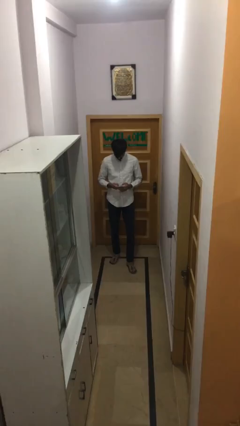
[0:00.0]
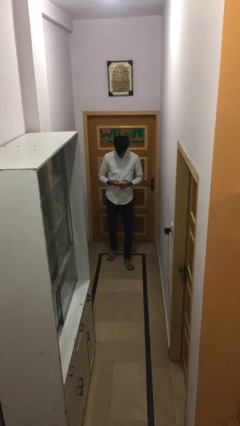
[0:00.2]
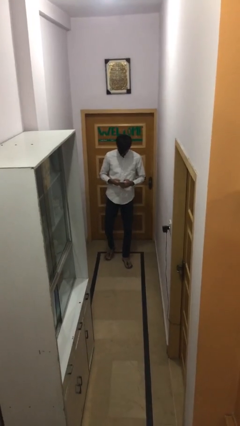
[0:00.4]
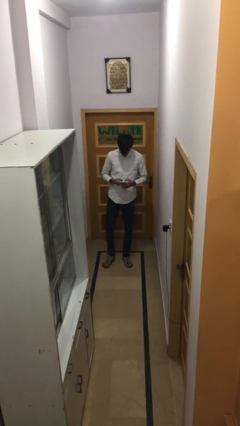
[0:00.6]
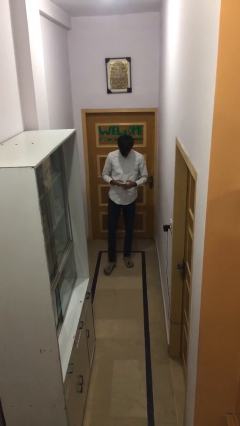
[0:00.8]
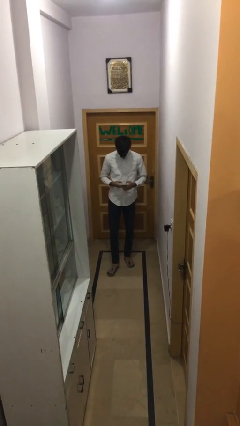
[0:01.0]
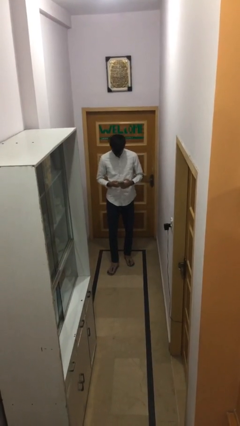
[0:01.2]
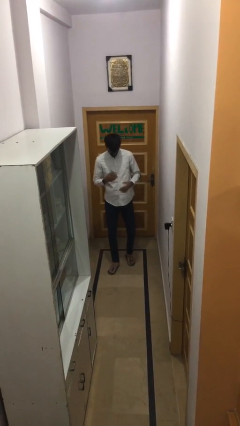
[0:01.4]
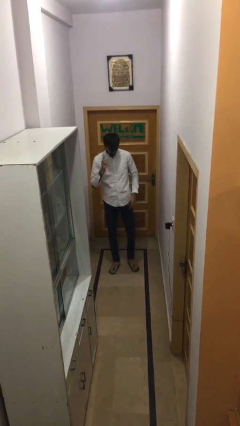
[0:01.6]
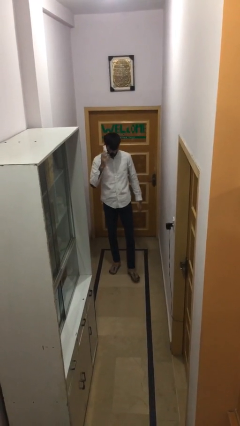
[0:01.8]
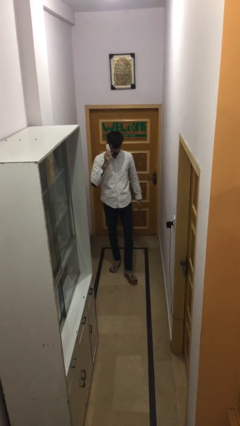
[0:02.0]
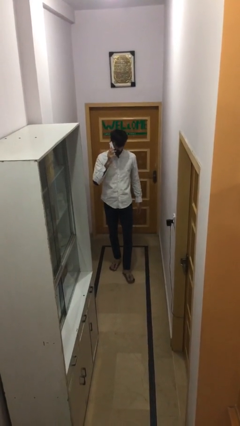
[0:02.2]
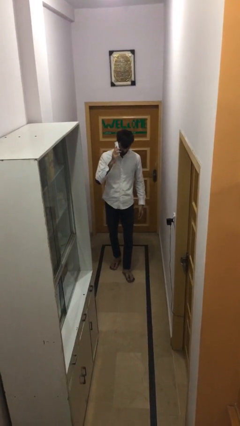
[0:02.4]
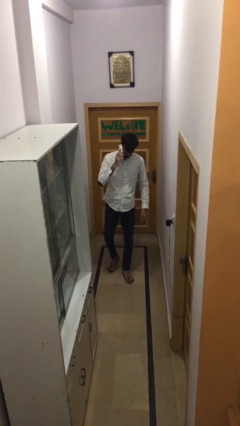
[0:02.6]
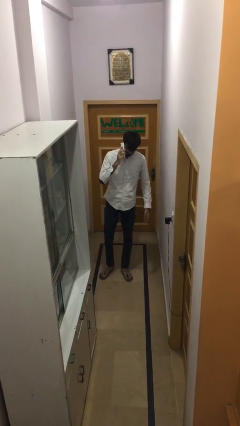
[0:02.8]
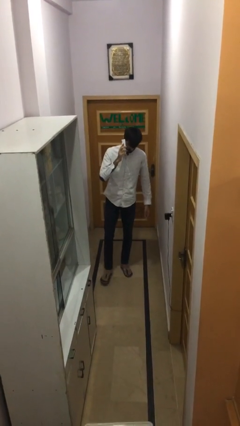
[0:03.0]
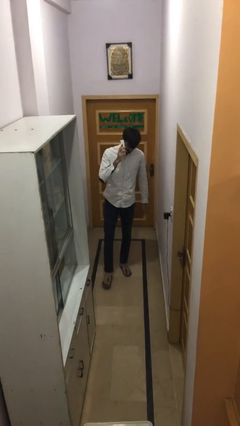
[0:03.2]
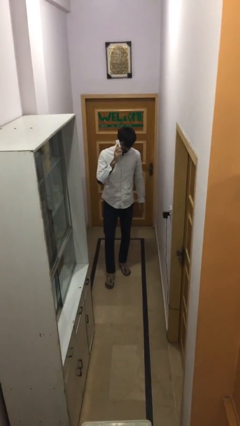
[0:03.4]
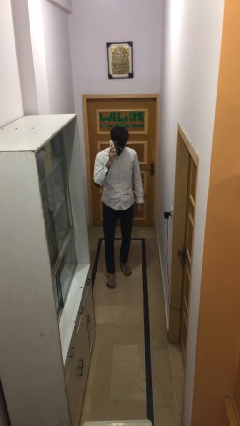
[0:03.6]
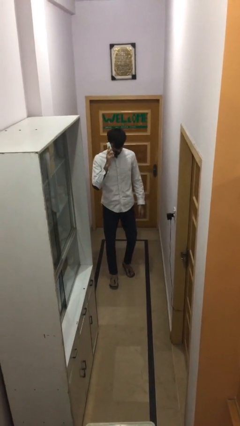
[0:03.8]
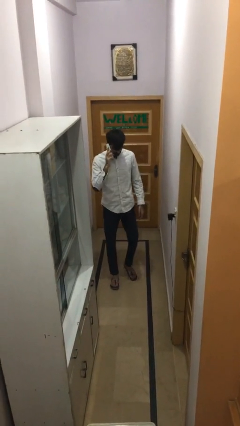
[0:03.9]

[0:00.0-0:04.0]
person talks on phone

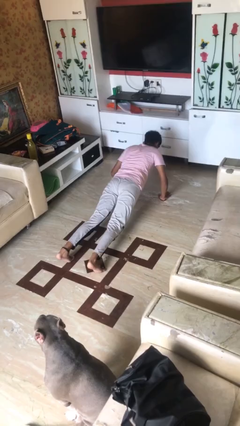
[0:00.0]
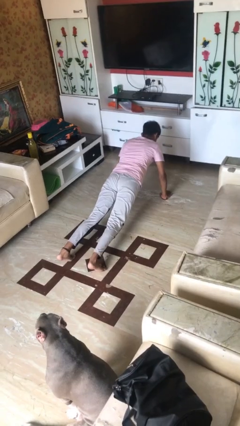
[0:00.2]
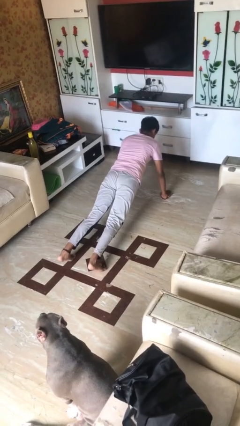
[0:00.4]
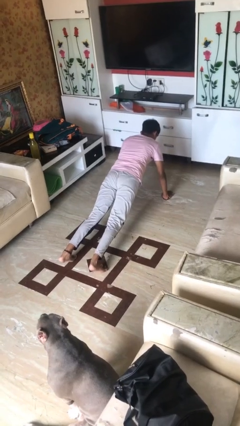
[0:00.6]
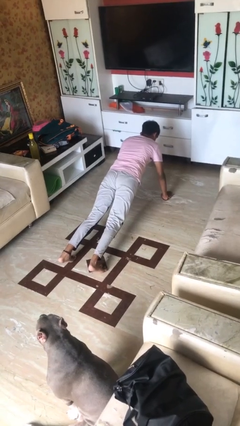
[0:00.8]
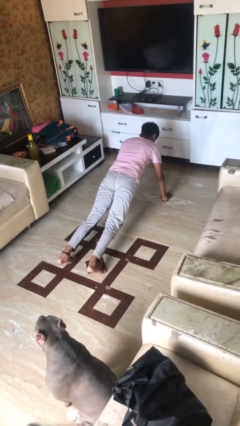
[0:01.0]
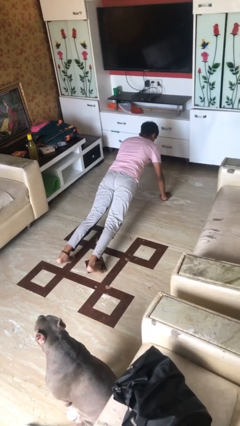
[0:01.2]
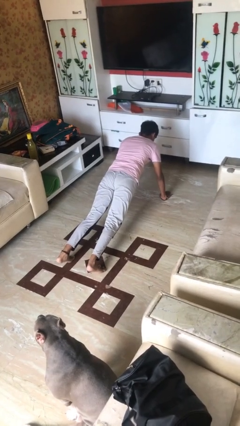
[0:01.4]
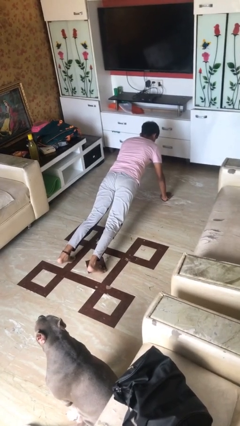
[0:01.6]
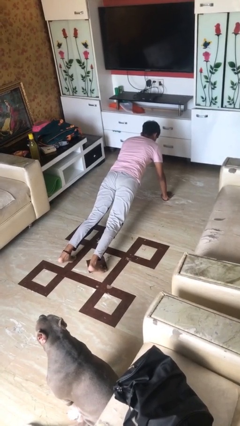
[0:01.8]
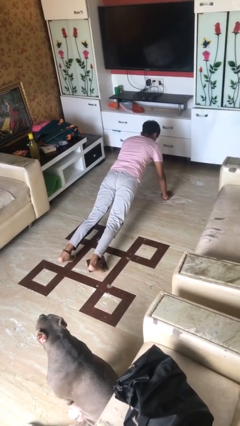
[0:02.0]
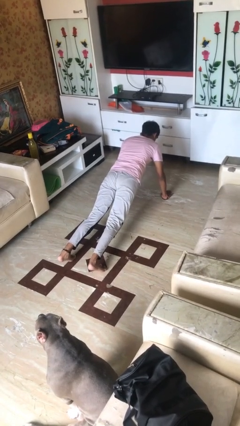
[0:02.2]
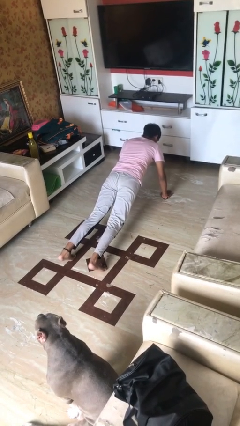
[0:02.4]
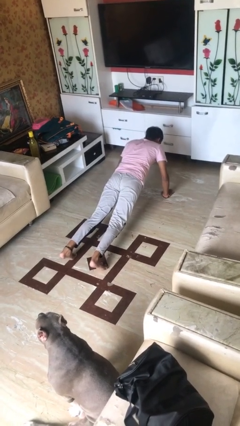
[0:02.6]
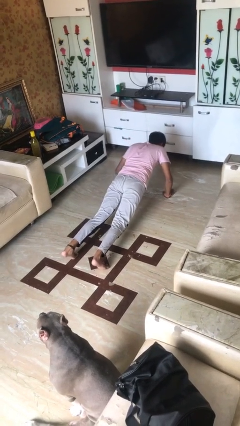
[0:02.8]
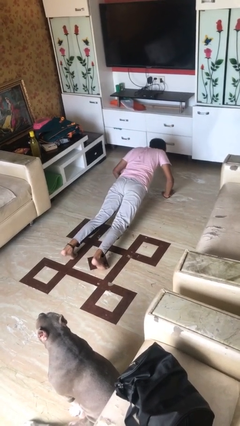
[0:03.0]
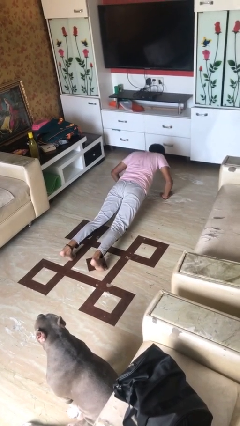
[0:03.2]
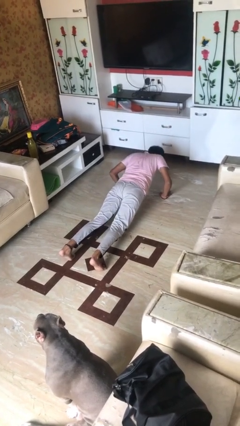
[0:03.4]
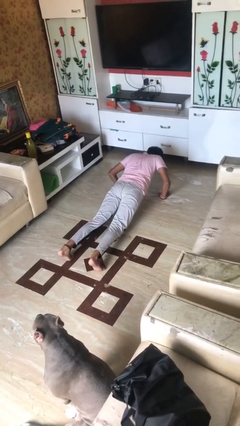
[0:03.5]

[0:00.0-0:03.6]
person exercises with pushup

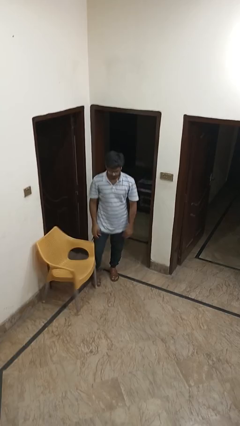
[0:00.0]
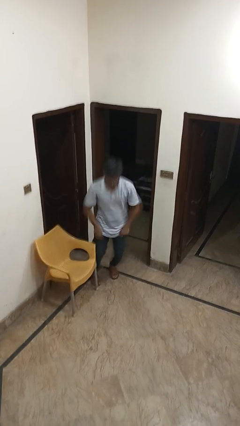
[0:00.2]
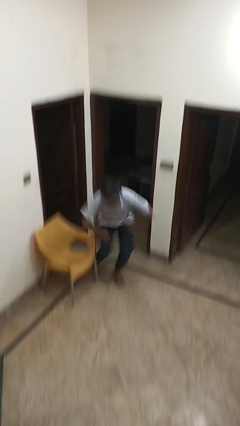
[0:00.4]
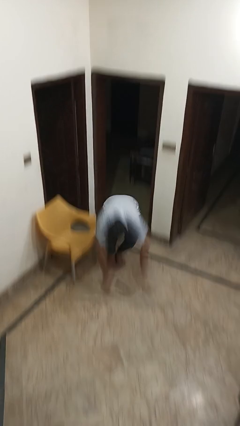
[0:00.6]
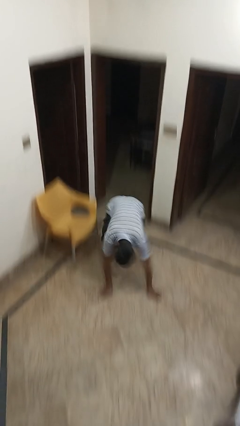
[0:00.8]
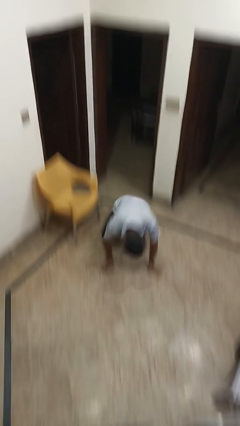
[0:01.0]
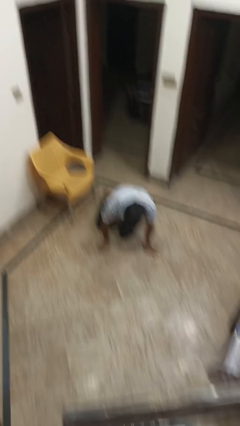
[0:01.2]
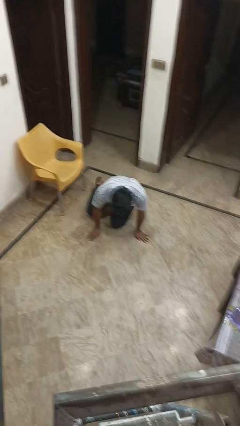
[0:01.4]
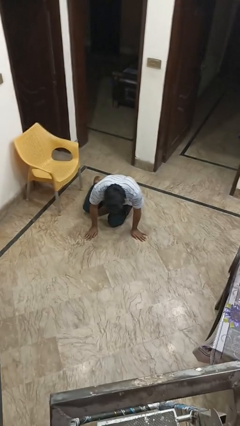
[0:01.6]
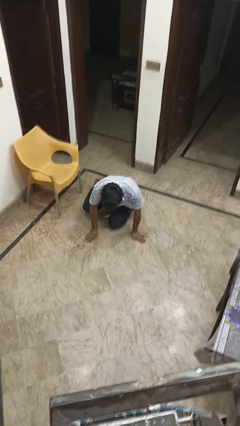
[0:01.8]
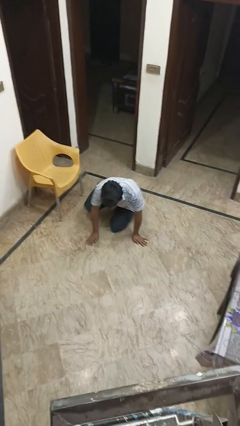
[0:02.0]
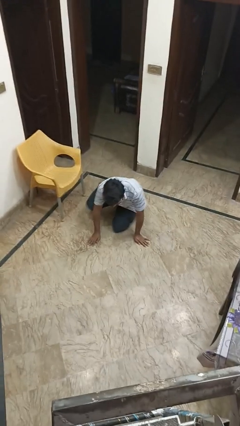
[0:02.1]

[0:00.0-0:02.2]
person trips on object on floor

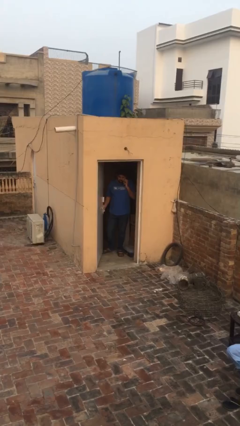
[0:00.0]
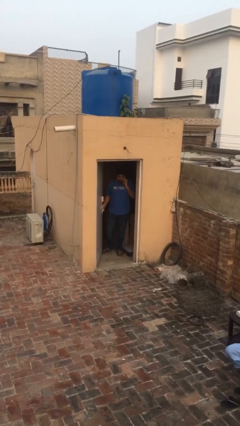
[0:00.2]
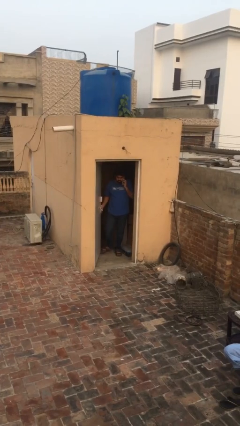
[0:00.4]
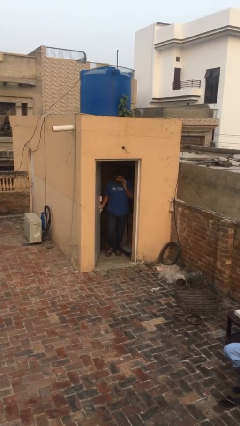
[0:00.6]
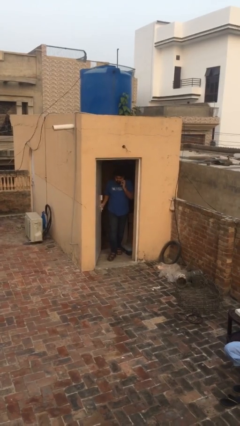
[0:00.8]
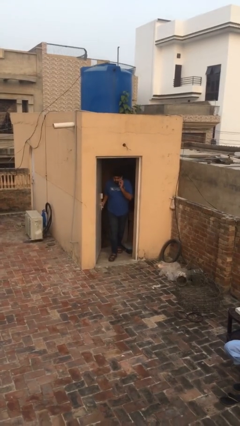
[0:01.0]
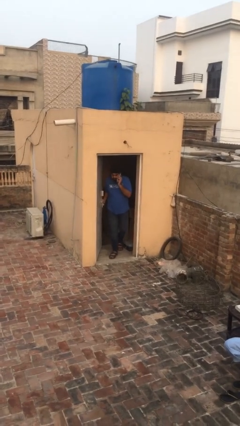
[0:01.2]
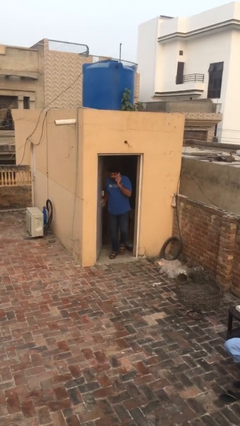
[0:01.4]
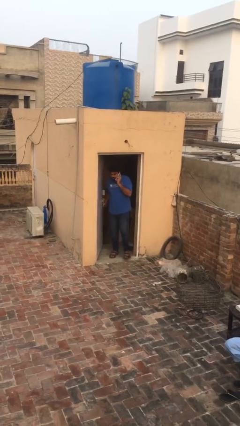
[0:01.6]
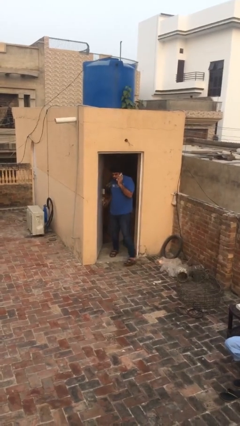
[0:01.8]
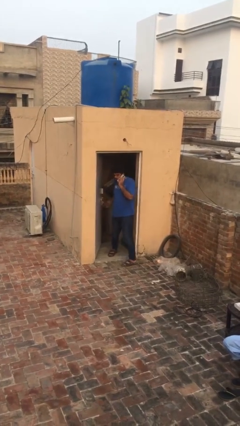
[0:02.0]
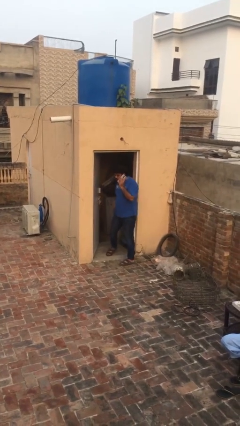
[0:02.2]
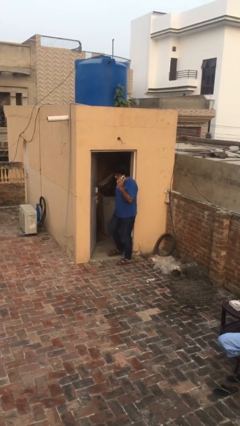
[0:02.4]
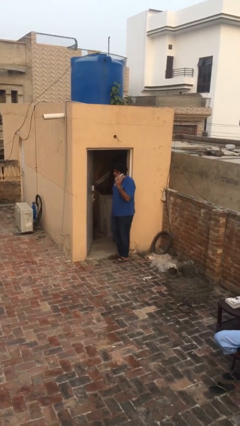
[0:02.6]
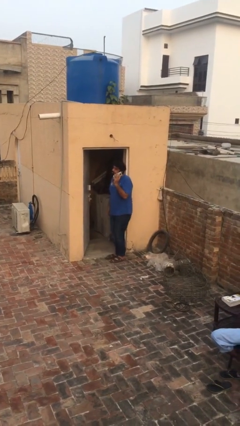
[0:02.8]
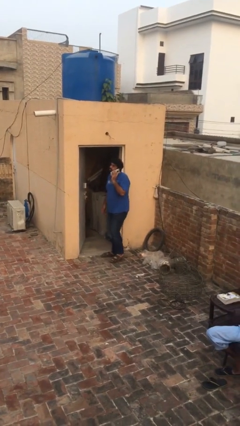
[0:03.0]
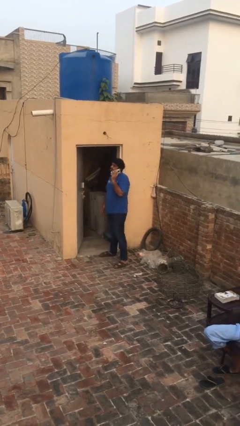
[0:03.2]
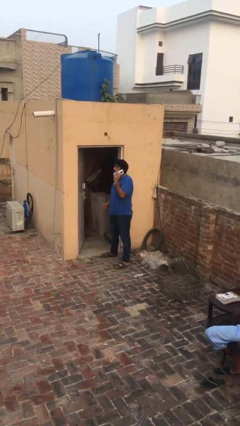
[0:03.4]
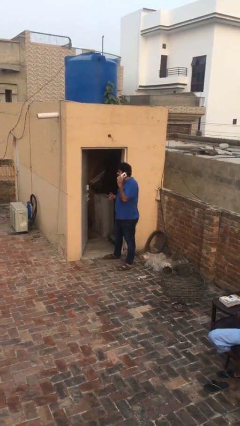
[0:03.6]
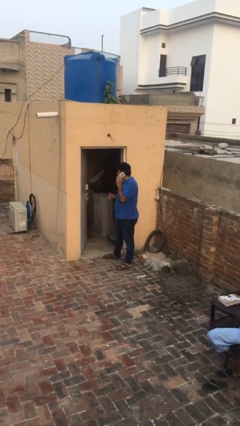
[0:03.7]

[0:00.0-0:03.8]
person enters scene through structure

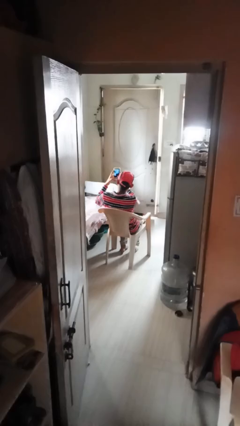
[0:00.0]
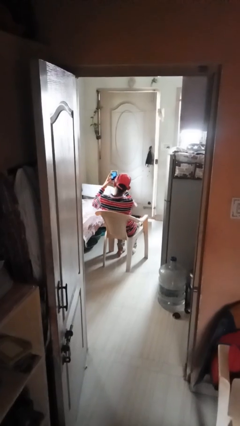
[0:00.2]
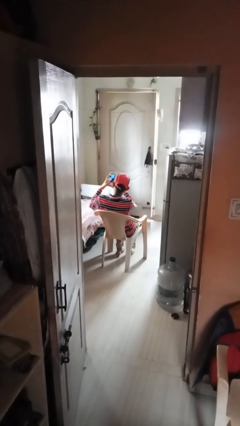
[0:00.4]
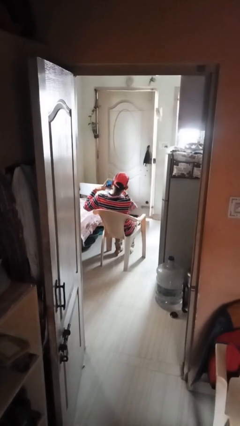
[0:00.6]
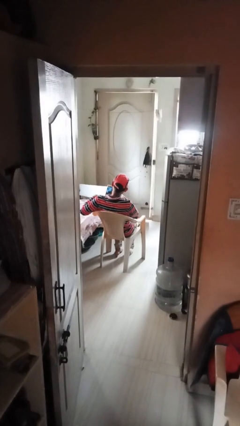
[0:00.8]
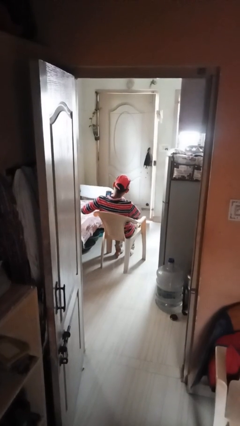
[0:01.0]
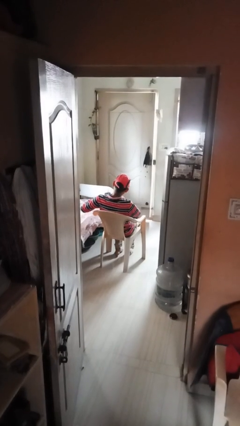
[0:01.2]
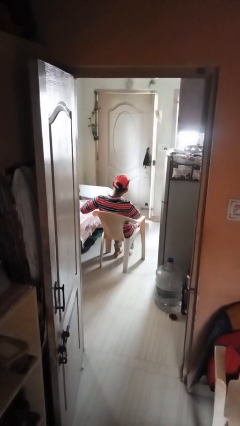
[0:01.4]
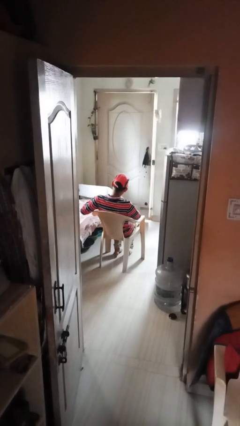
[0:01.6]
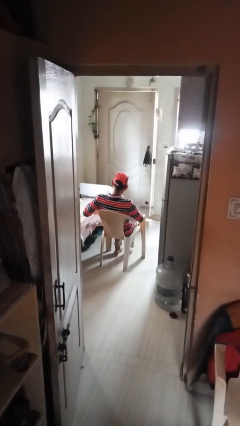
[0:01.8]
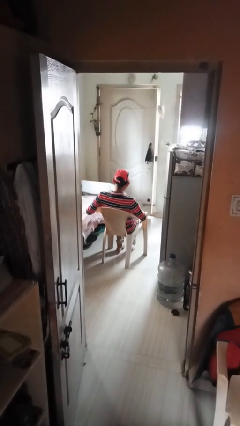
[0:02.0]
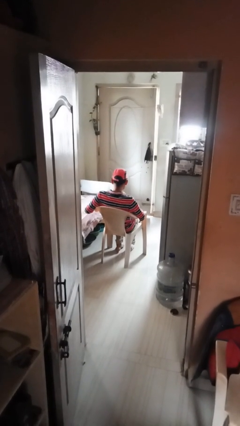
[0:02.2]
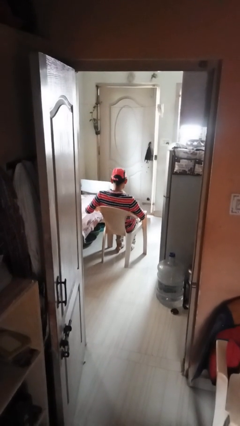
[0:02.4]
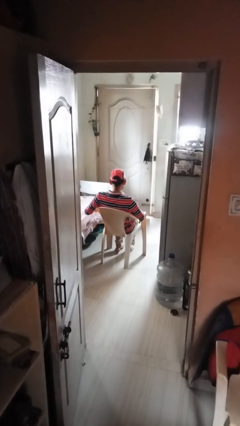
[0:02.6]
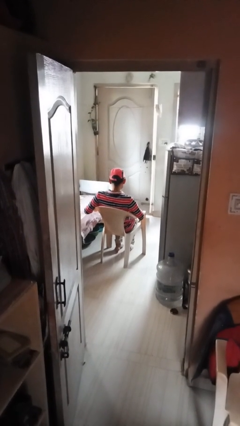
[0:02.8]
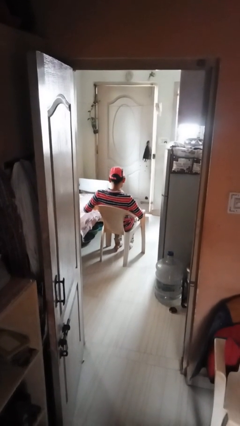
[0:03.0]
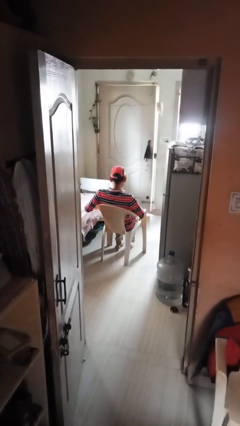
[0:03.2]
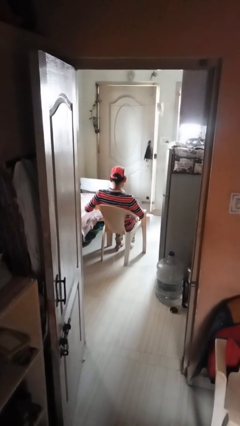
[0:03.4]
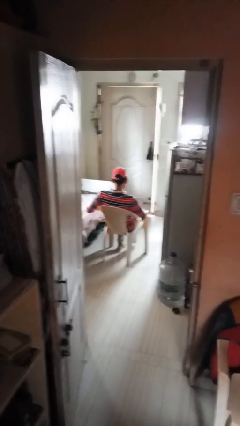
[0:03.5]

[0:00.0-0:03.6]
person puts phone into pocket

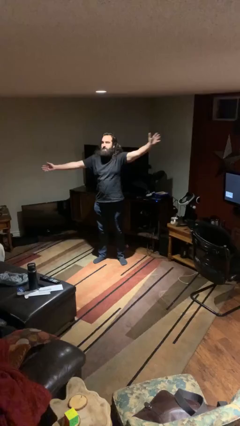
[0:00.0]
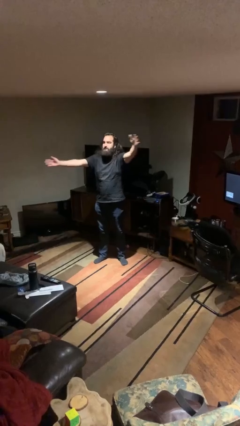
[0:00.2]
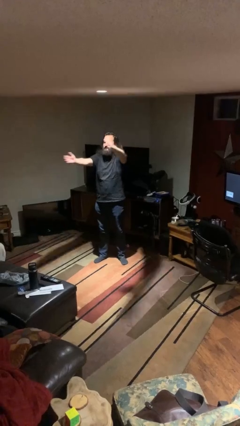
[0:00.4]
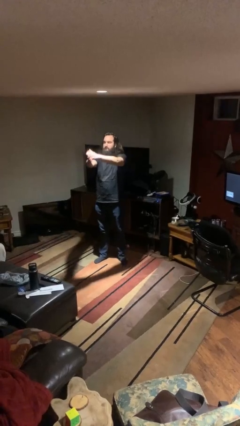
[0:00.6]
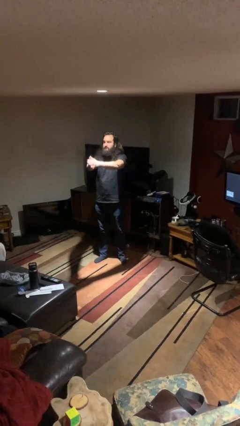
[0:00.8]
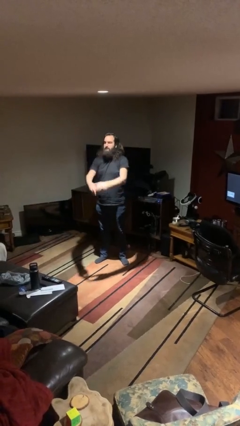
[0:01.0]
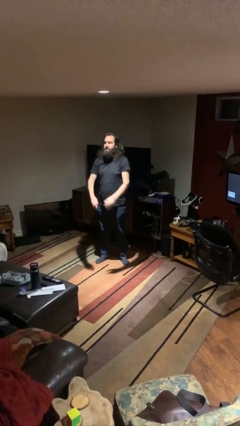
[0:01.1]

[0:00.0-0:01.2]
person gestures zoom in
